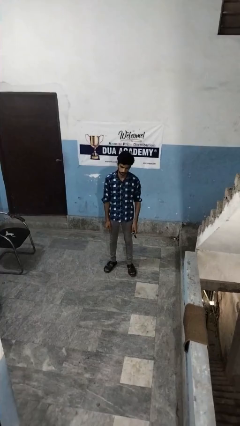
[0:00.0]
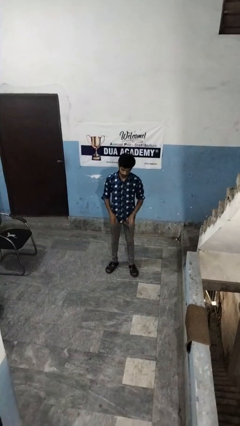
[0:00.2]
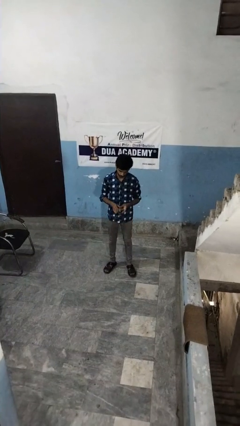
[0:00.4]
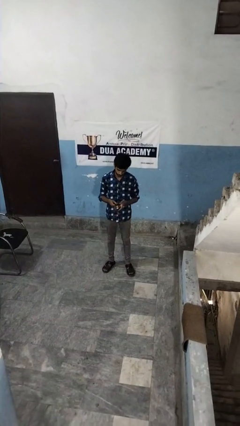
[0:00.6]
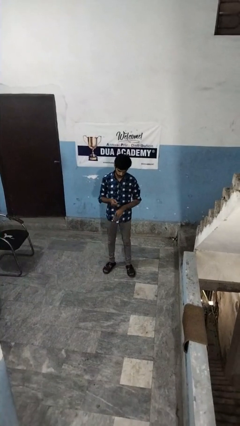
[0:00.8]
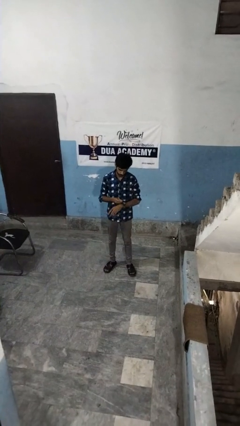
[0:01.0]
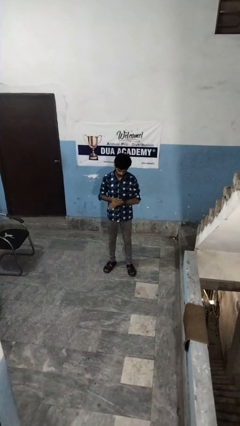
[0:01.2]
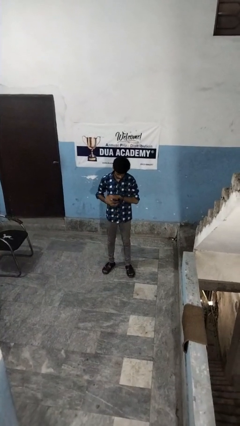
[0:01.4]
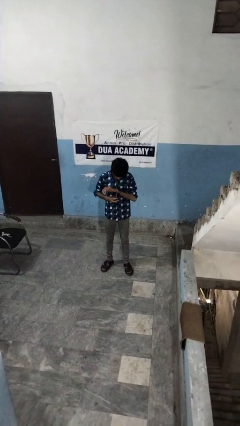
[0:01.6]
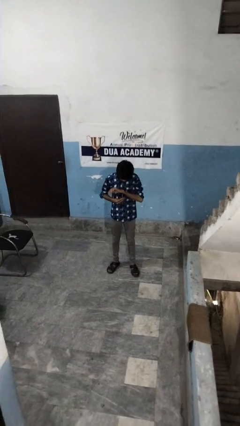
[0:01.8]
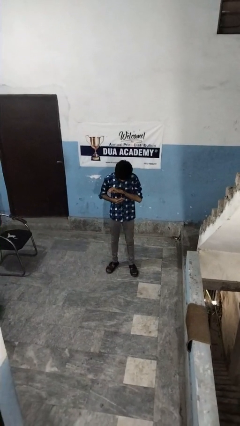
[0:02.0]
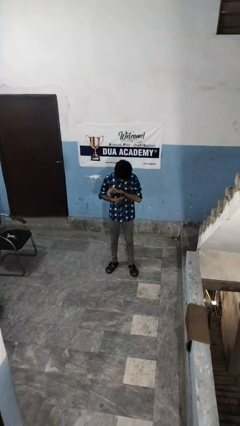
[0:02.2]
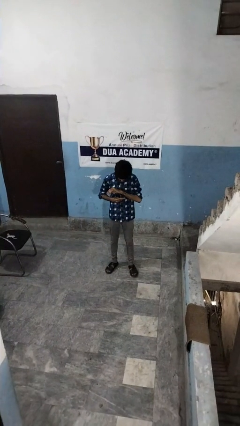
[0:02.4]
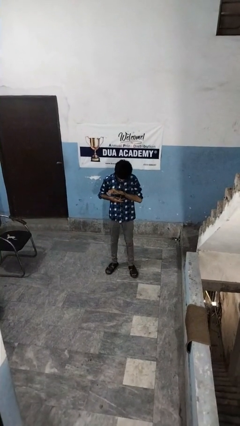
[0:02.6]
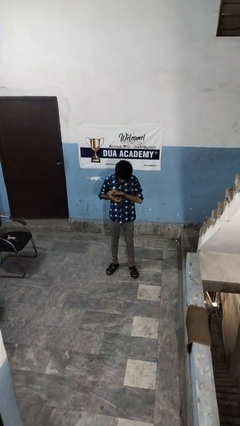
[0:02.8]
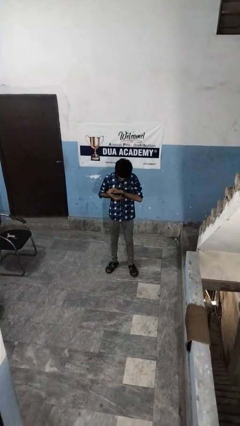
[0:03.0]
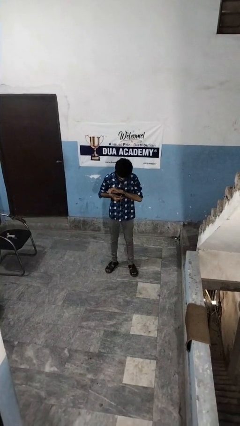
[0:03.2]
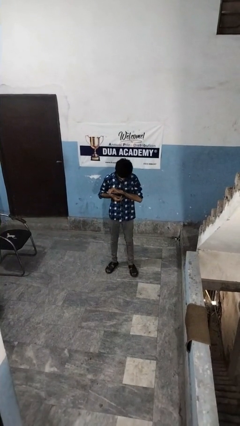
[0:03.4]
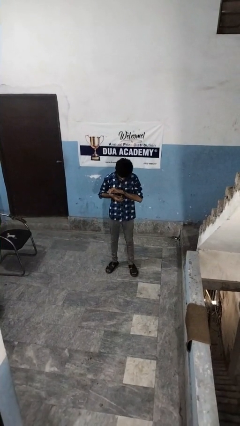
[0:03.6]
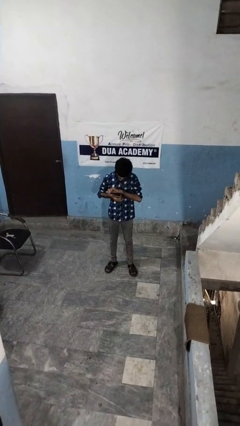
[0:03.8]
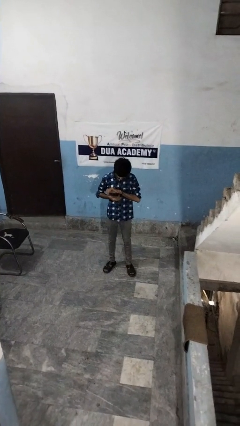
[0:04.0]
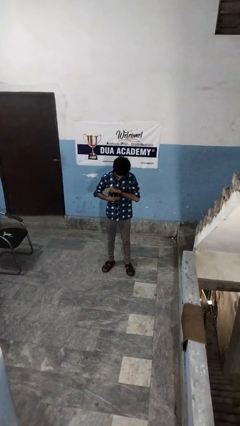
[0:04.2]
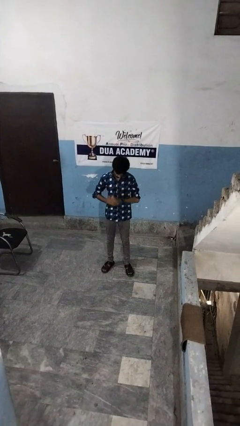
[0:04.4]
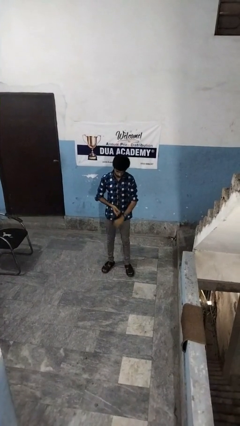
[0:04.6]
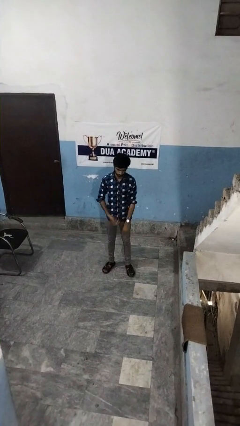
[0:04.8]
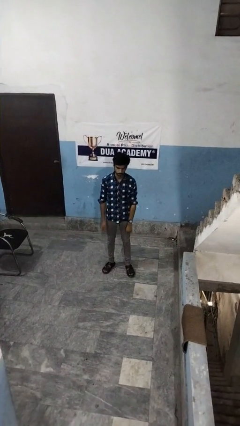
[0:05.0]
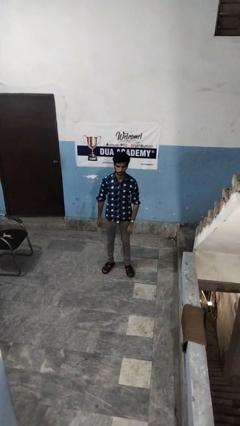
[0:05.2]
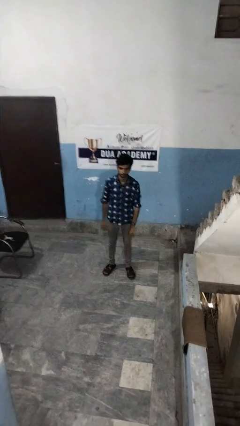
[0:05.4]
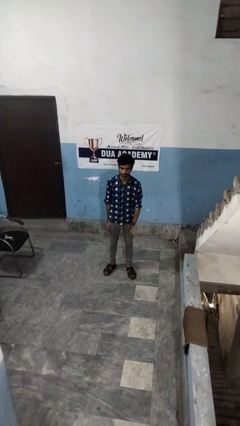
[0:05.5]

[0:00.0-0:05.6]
person puts on wristwatch

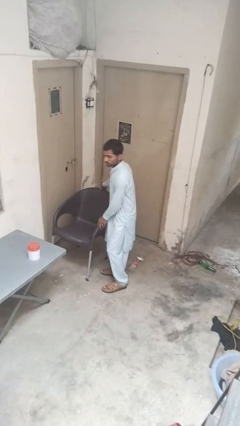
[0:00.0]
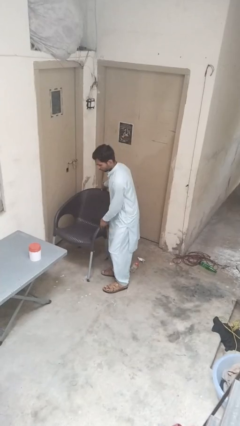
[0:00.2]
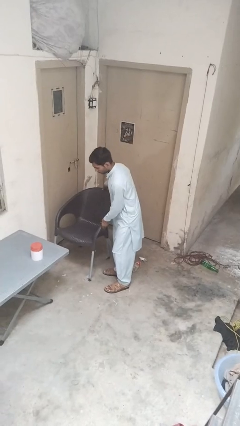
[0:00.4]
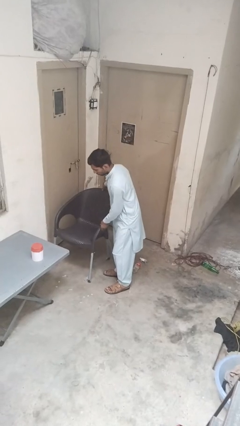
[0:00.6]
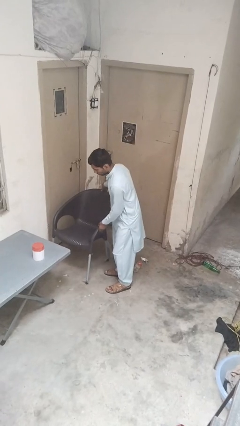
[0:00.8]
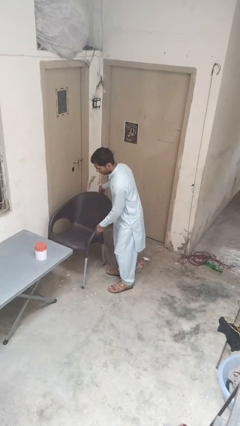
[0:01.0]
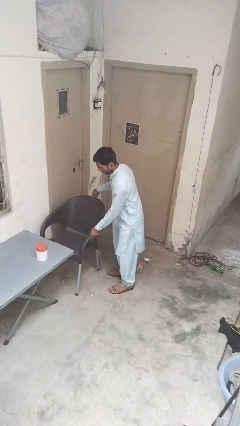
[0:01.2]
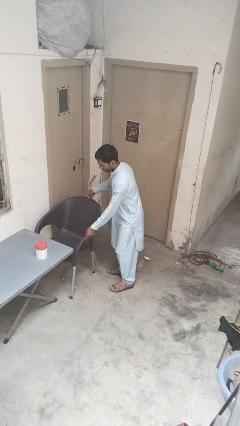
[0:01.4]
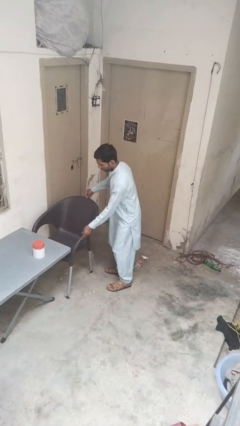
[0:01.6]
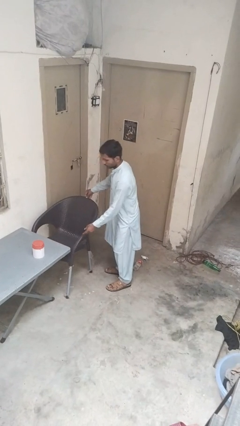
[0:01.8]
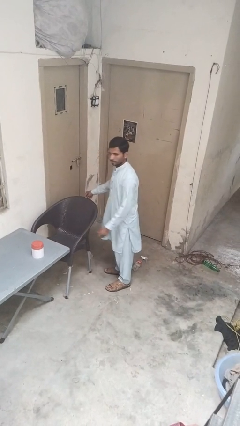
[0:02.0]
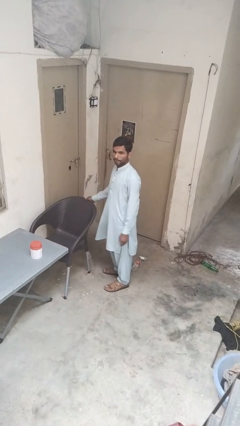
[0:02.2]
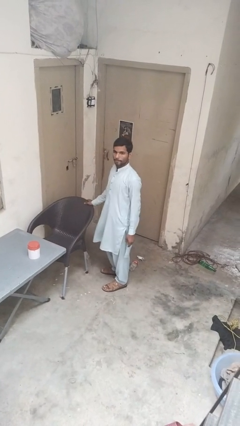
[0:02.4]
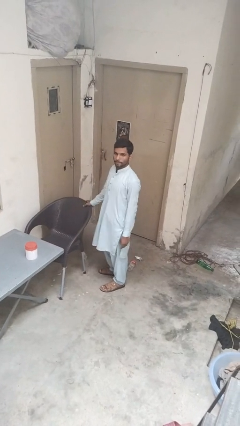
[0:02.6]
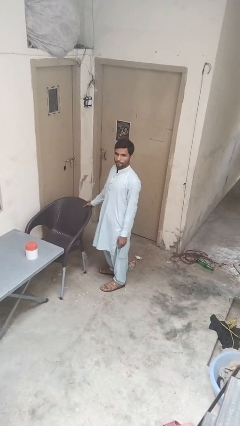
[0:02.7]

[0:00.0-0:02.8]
person pushes in chair

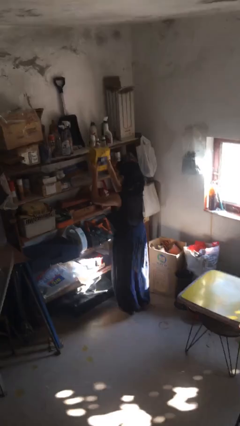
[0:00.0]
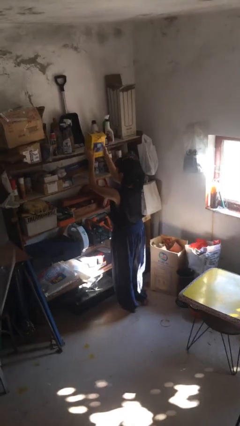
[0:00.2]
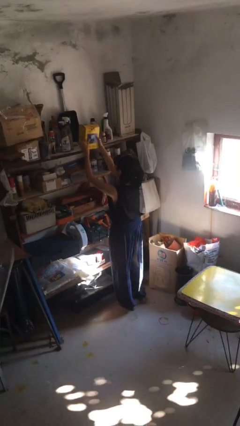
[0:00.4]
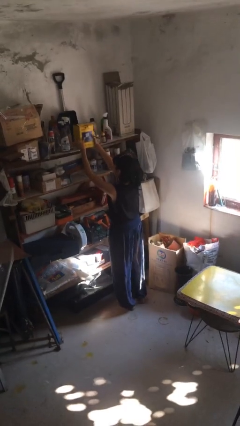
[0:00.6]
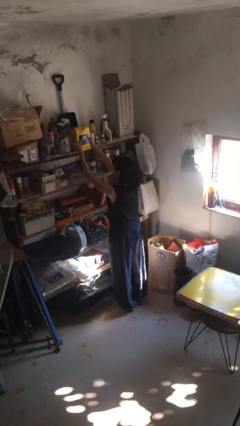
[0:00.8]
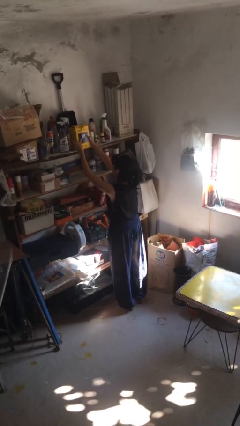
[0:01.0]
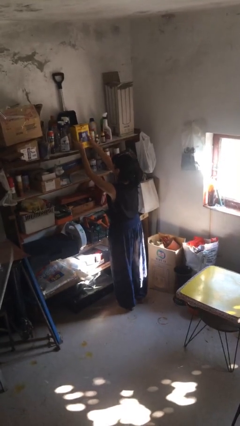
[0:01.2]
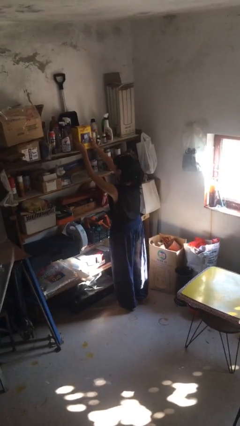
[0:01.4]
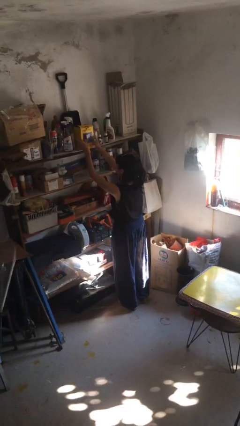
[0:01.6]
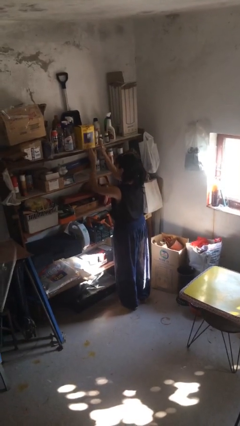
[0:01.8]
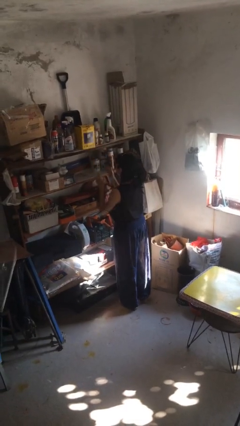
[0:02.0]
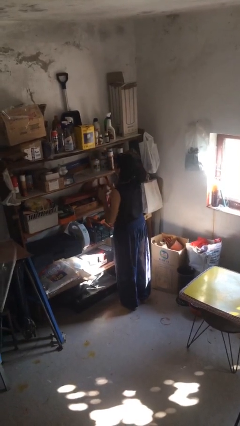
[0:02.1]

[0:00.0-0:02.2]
person puts down object on shelf

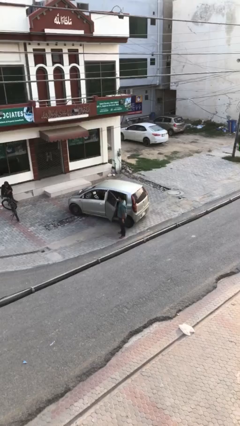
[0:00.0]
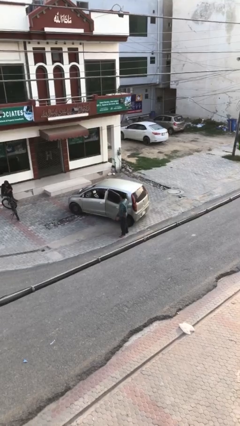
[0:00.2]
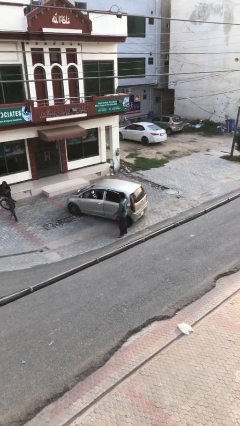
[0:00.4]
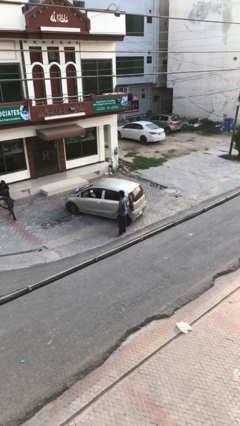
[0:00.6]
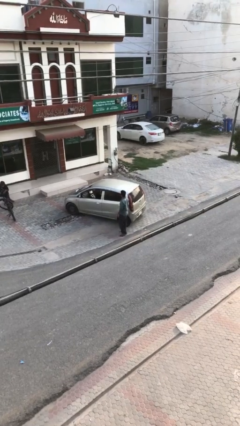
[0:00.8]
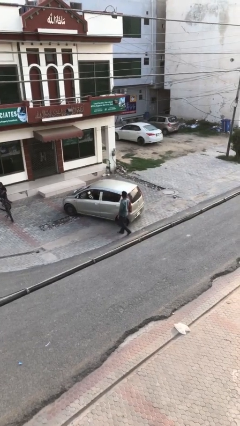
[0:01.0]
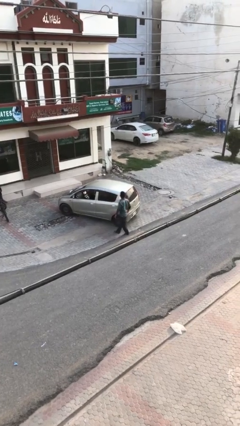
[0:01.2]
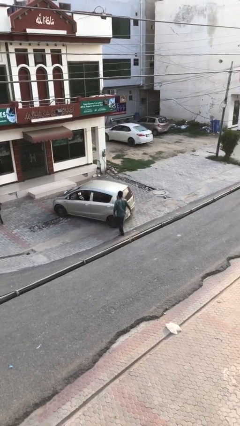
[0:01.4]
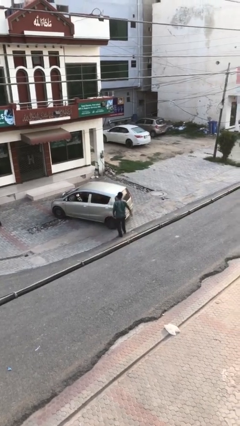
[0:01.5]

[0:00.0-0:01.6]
person closes car door

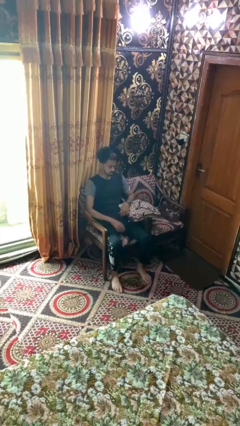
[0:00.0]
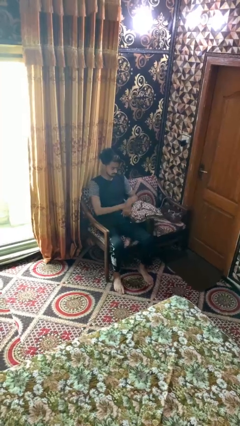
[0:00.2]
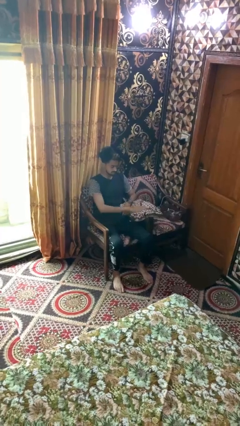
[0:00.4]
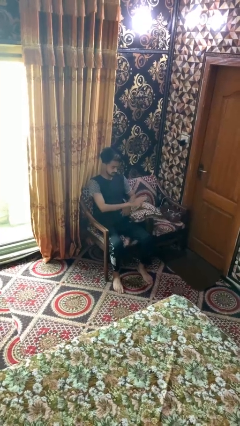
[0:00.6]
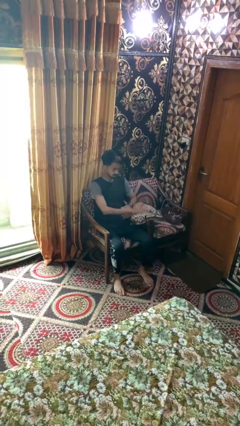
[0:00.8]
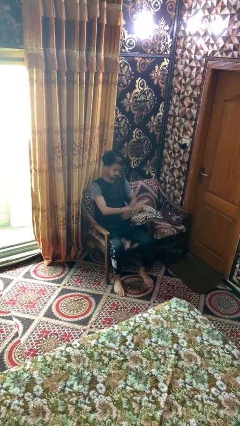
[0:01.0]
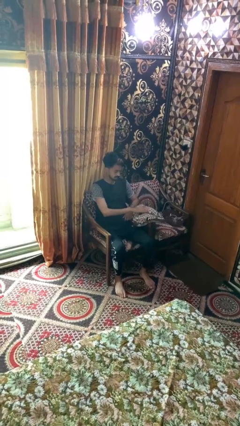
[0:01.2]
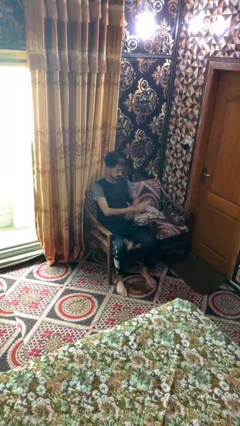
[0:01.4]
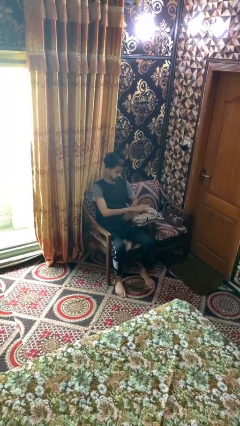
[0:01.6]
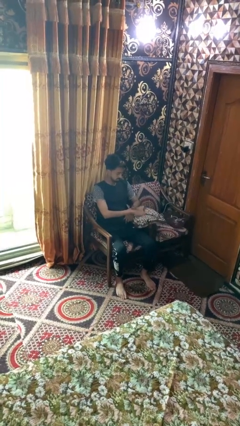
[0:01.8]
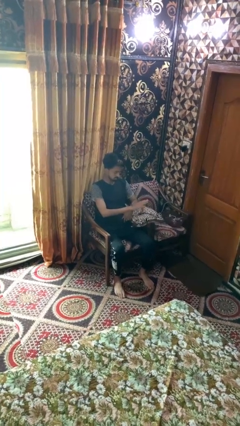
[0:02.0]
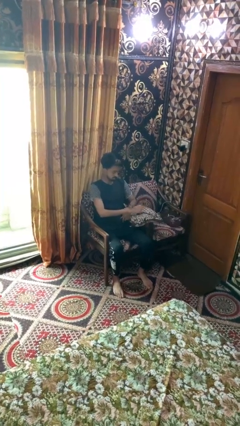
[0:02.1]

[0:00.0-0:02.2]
person taps object with finger

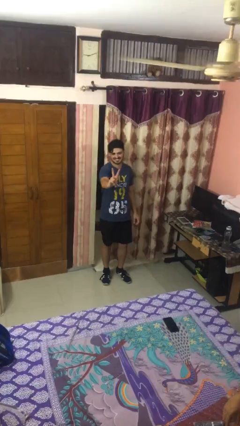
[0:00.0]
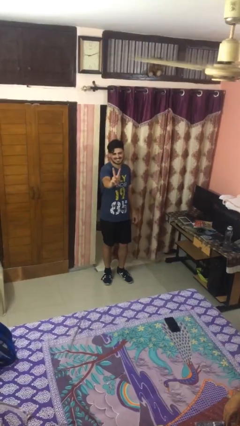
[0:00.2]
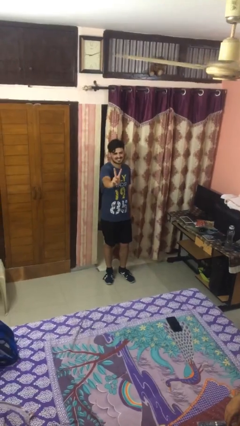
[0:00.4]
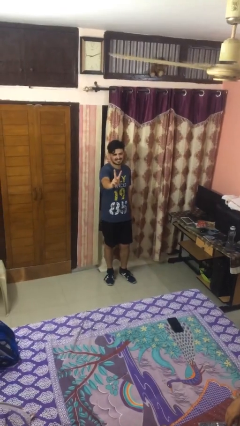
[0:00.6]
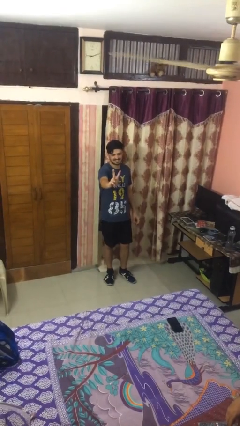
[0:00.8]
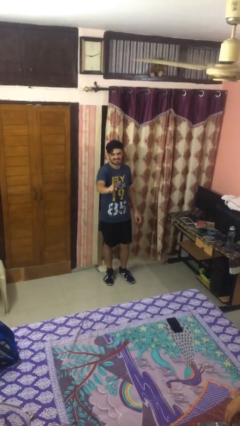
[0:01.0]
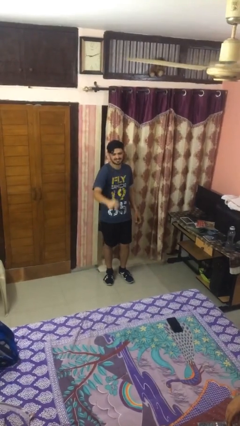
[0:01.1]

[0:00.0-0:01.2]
person gestures peace

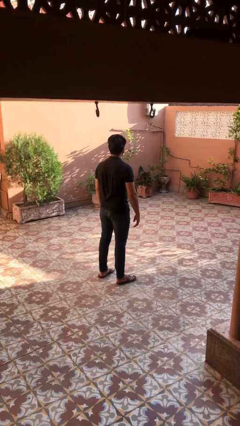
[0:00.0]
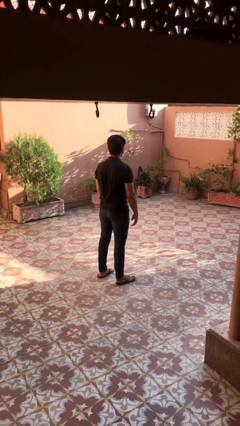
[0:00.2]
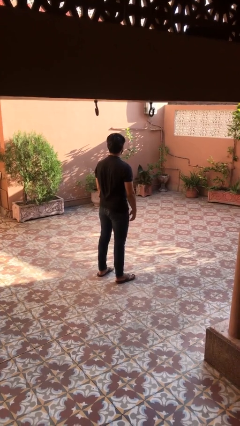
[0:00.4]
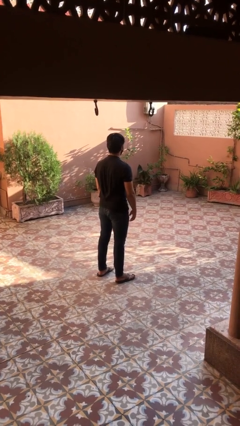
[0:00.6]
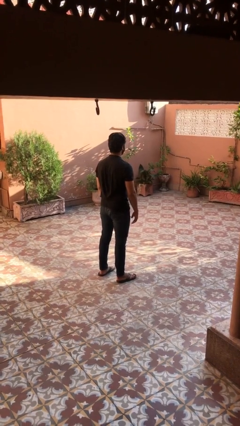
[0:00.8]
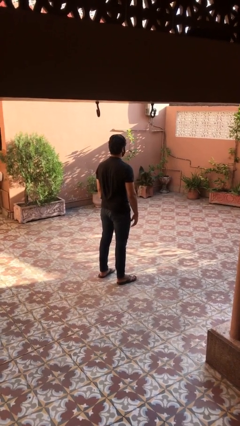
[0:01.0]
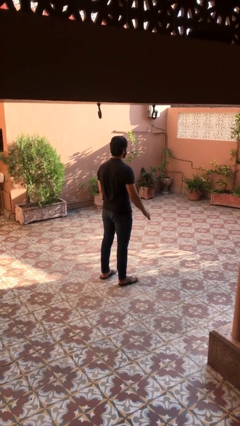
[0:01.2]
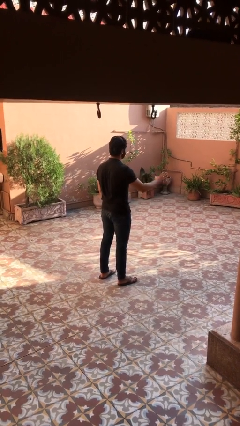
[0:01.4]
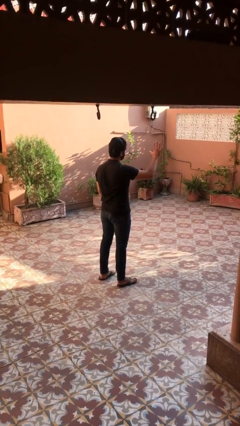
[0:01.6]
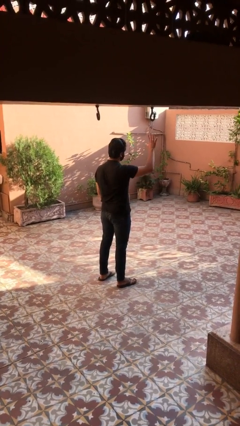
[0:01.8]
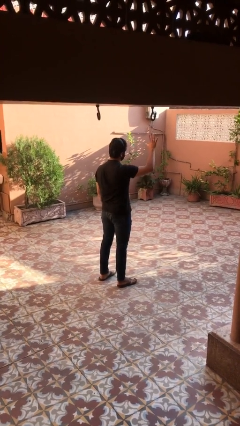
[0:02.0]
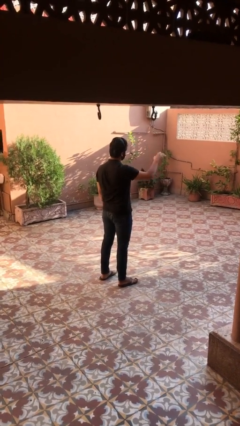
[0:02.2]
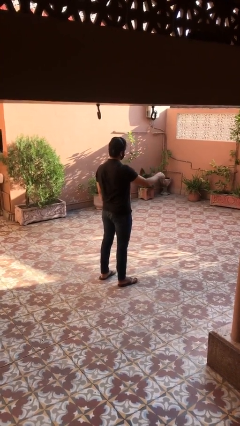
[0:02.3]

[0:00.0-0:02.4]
person gestures number five
